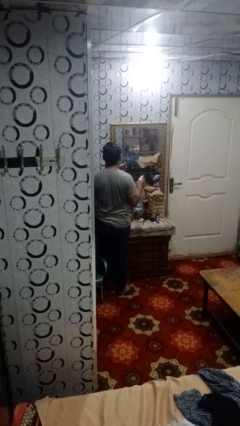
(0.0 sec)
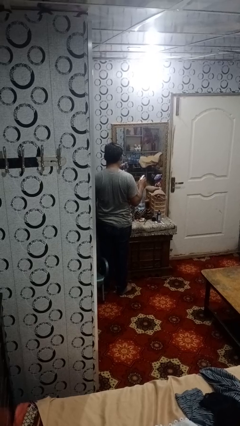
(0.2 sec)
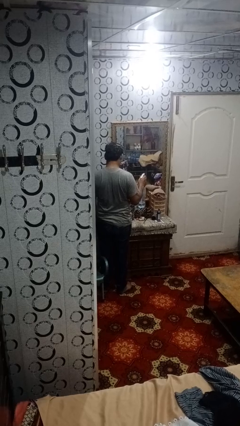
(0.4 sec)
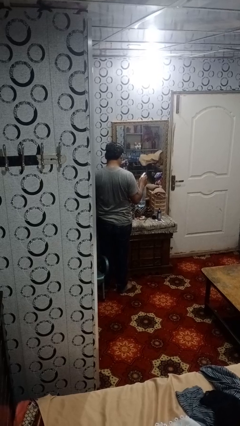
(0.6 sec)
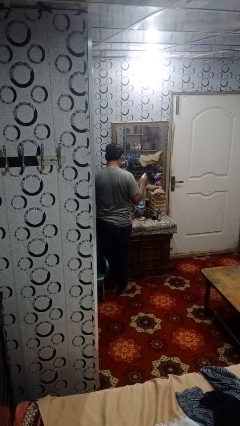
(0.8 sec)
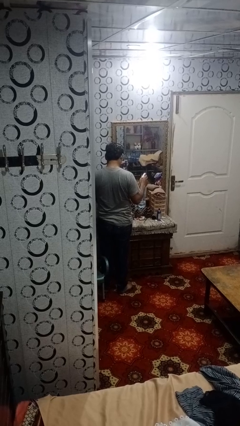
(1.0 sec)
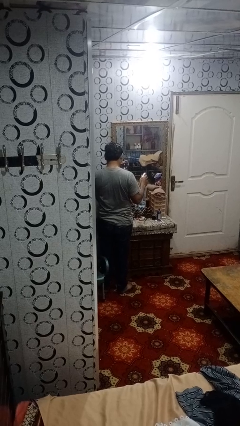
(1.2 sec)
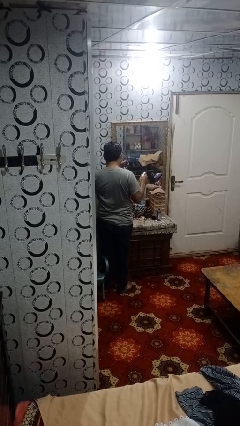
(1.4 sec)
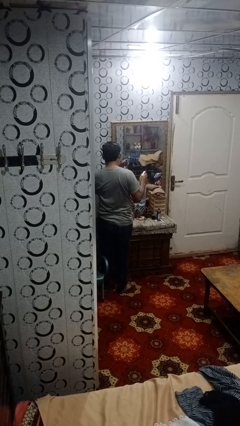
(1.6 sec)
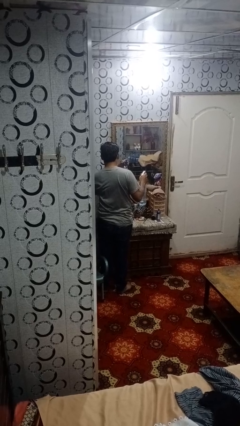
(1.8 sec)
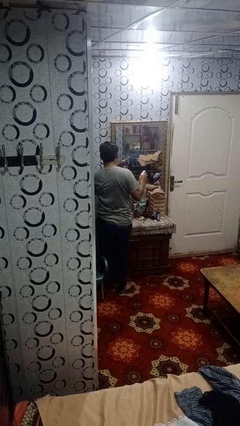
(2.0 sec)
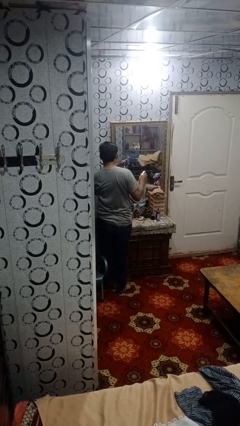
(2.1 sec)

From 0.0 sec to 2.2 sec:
person sprays from bottle

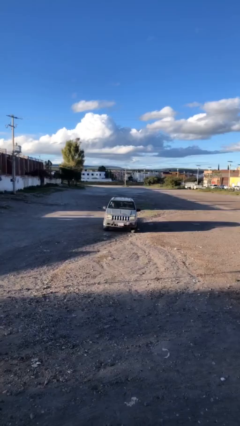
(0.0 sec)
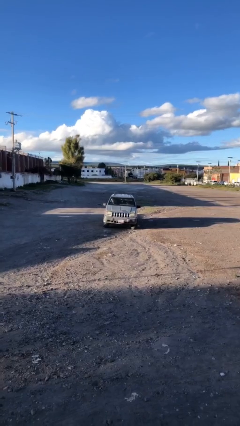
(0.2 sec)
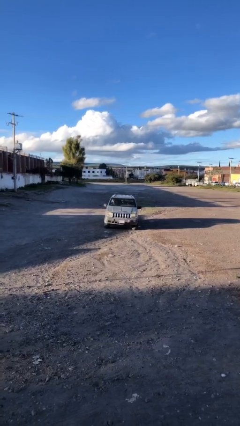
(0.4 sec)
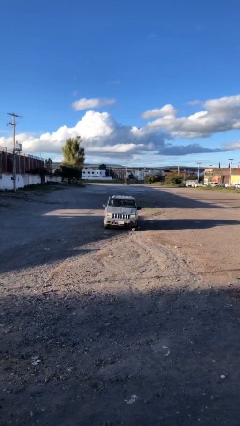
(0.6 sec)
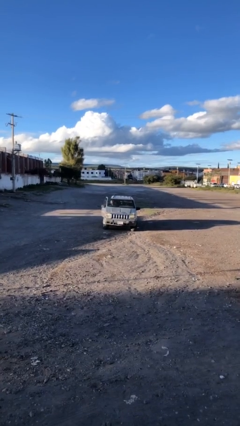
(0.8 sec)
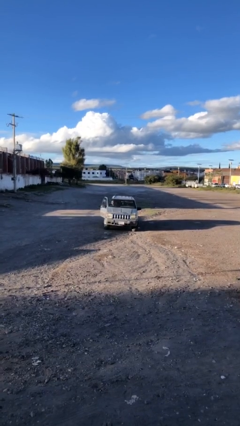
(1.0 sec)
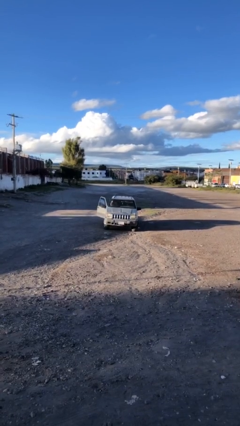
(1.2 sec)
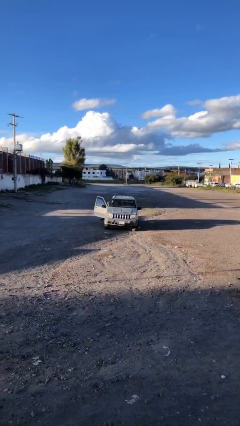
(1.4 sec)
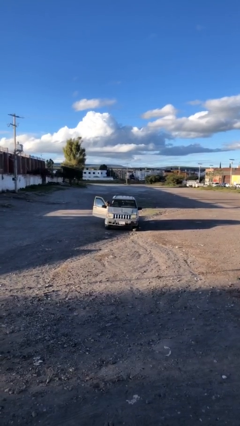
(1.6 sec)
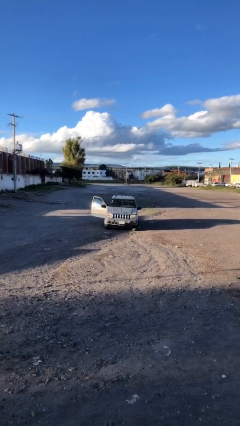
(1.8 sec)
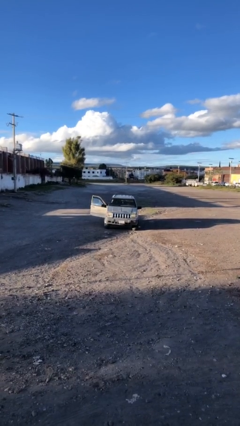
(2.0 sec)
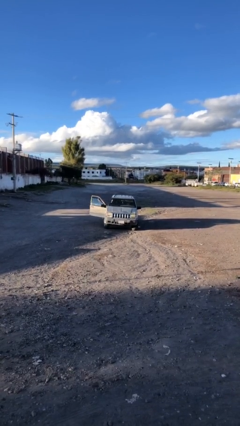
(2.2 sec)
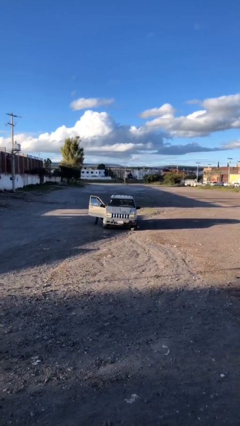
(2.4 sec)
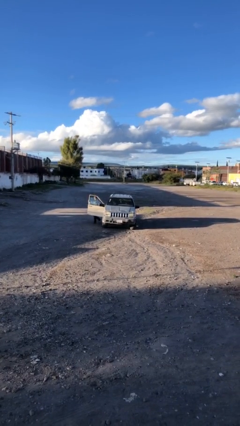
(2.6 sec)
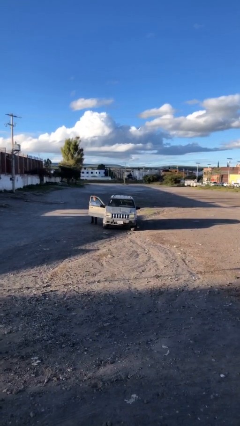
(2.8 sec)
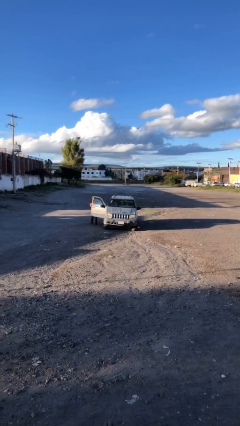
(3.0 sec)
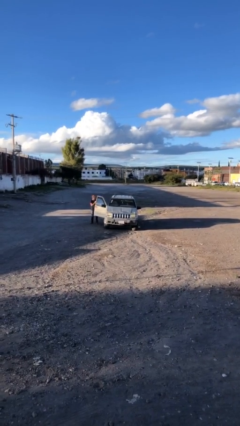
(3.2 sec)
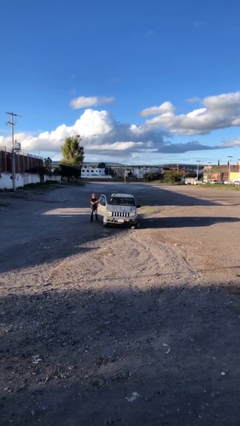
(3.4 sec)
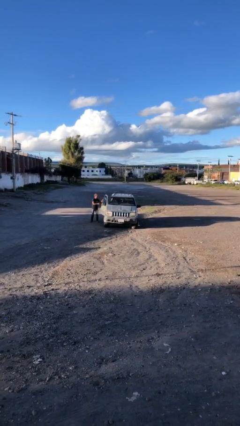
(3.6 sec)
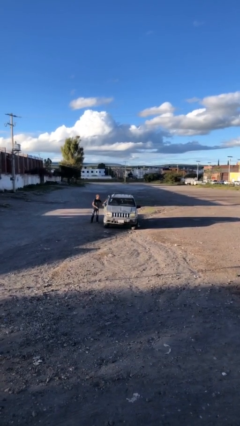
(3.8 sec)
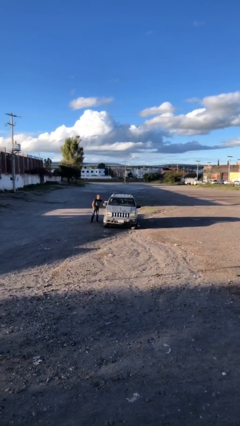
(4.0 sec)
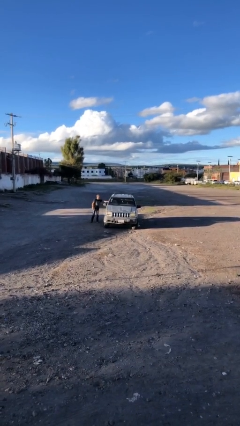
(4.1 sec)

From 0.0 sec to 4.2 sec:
car drops off person

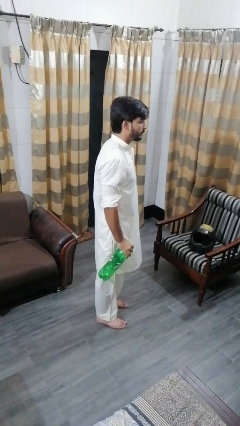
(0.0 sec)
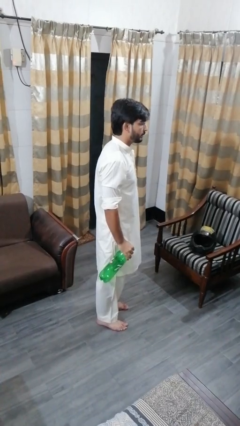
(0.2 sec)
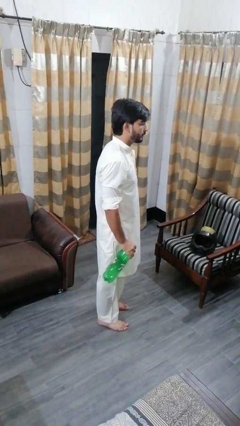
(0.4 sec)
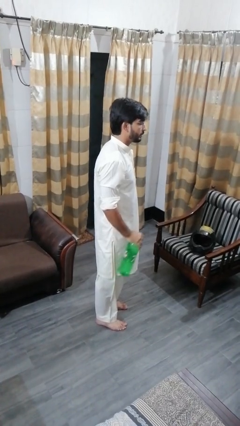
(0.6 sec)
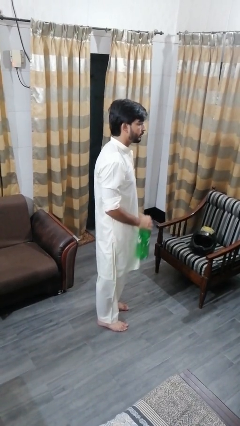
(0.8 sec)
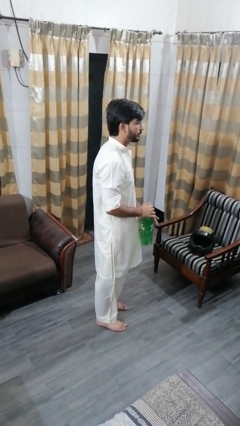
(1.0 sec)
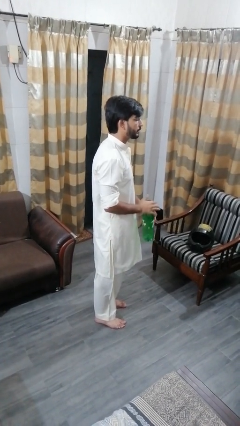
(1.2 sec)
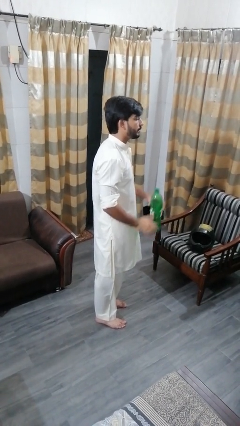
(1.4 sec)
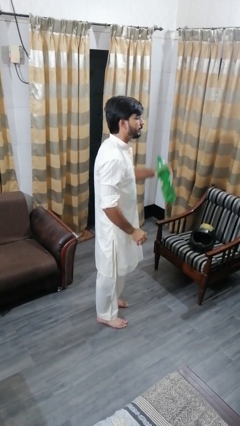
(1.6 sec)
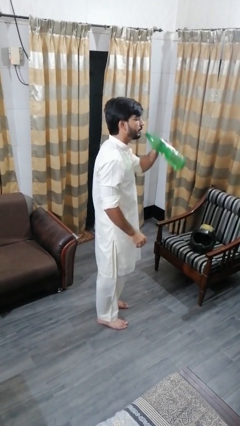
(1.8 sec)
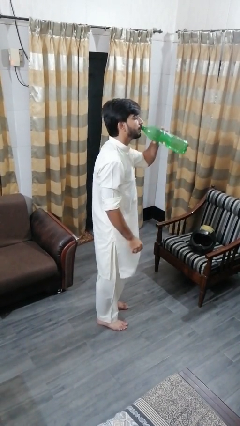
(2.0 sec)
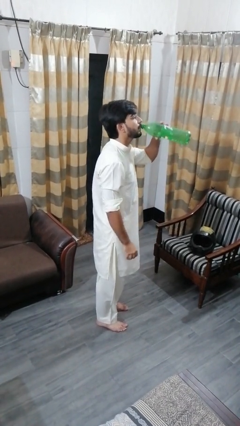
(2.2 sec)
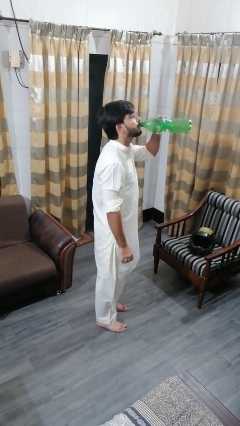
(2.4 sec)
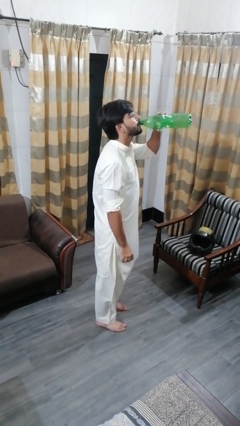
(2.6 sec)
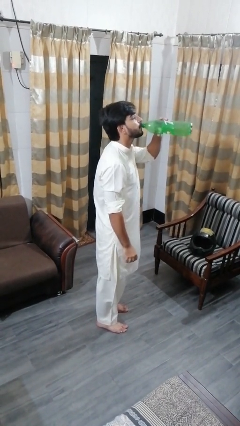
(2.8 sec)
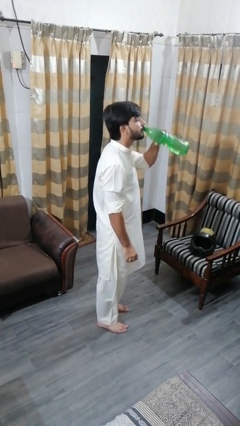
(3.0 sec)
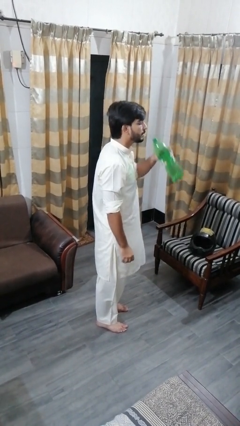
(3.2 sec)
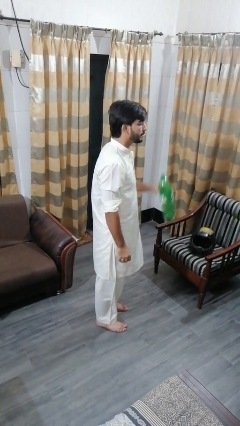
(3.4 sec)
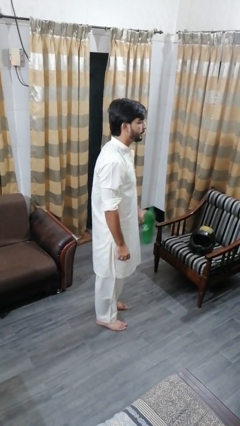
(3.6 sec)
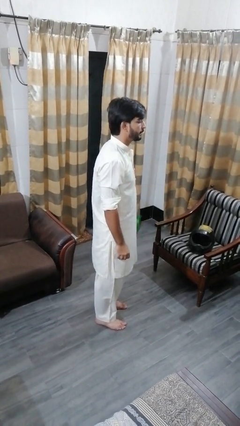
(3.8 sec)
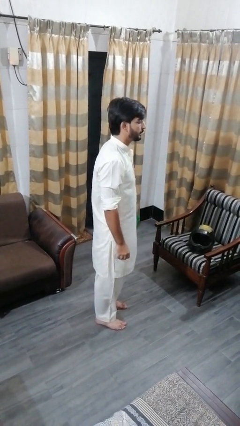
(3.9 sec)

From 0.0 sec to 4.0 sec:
person drinks from bottle

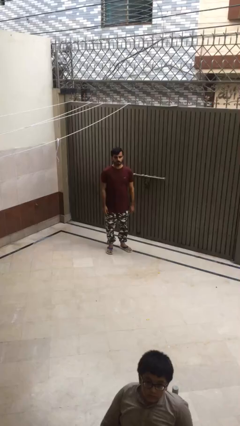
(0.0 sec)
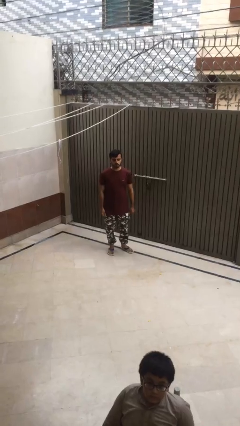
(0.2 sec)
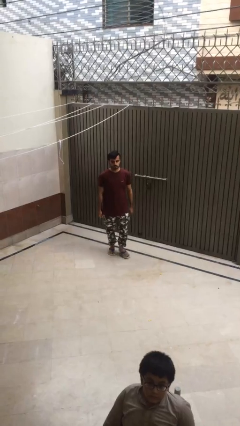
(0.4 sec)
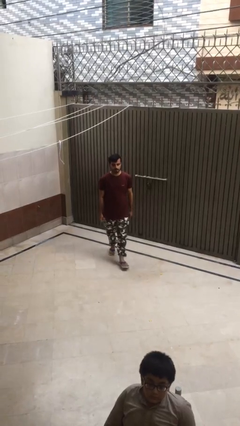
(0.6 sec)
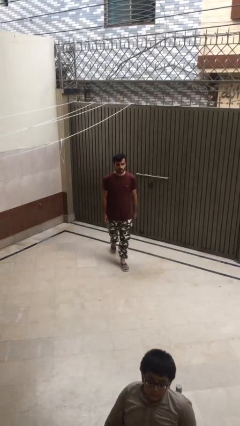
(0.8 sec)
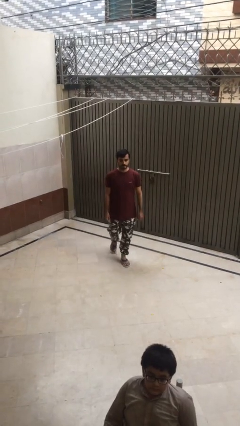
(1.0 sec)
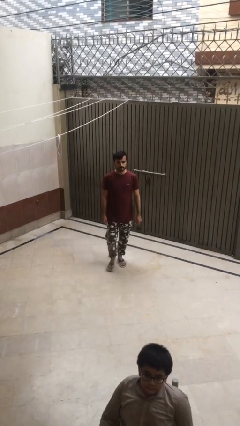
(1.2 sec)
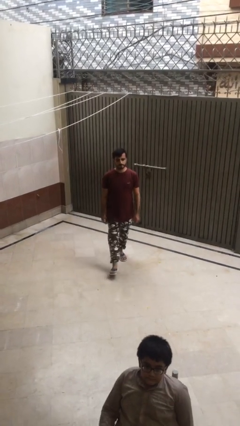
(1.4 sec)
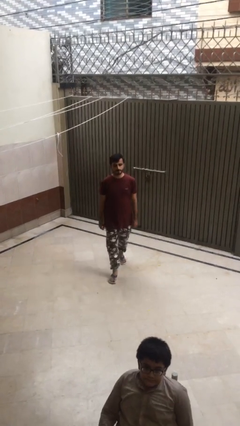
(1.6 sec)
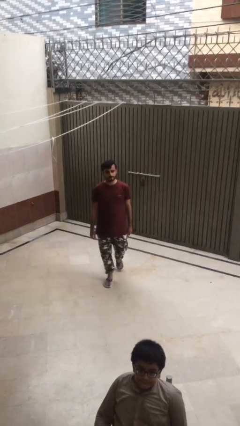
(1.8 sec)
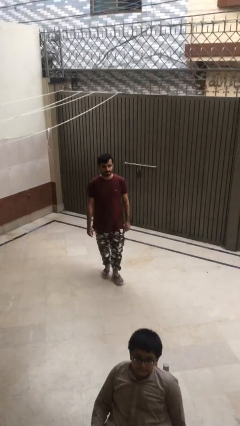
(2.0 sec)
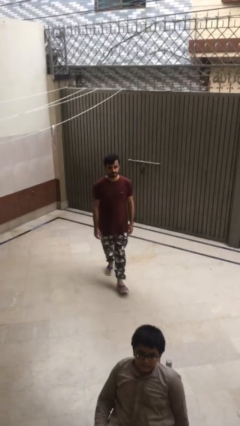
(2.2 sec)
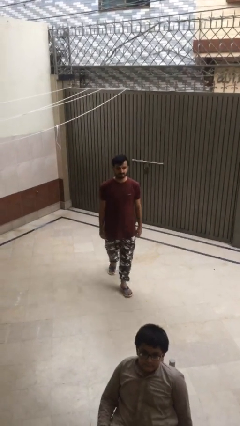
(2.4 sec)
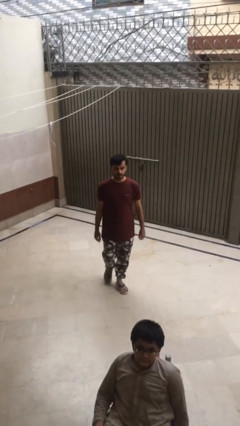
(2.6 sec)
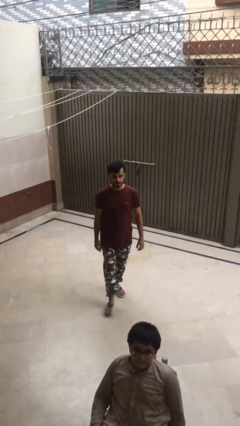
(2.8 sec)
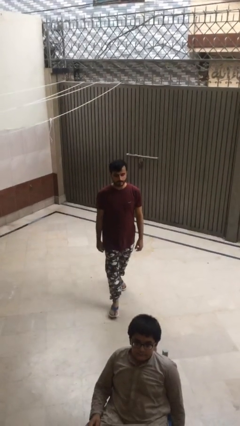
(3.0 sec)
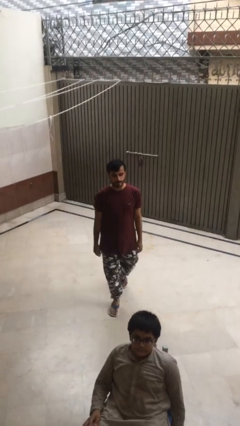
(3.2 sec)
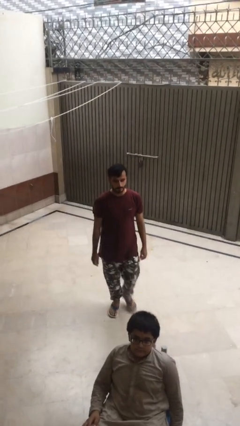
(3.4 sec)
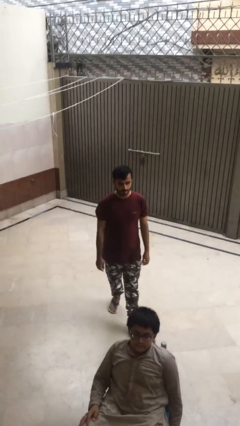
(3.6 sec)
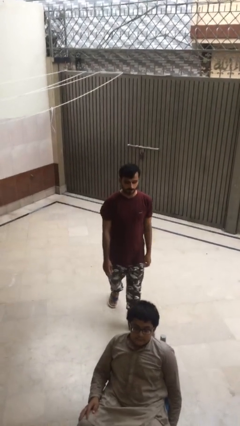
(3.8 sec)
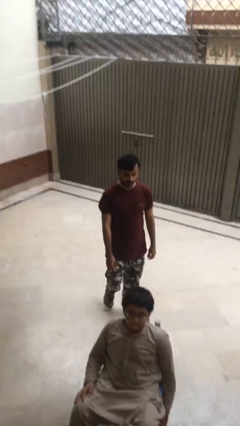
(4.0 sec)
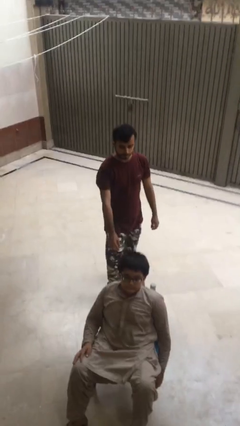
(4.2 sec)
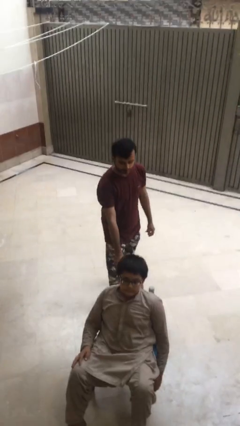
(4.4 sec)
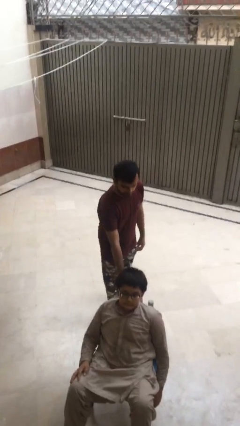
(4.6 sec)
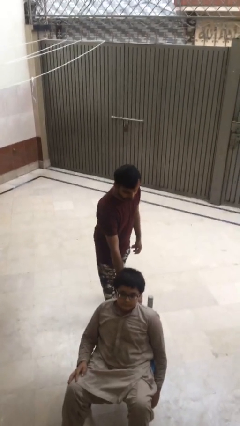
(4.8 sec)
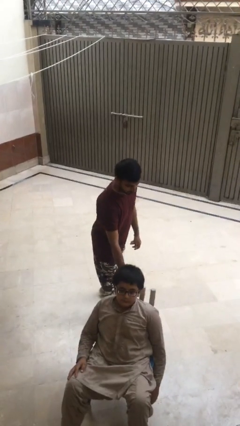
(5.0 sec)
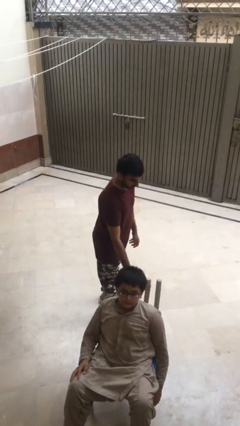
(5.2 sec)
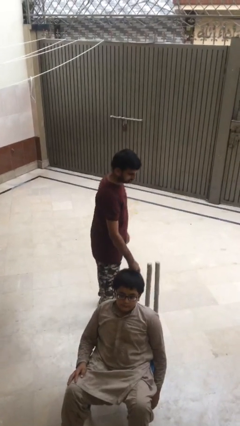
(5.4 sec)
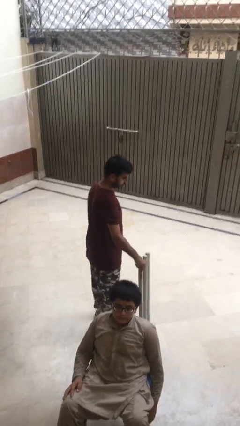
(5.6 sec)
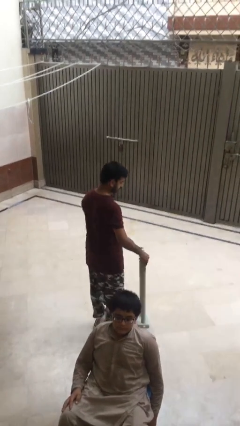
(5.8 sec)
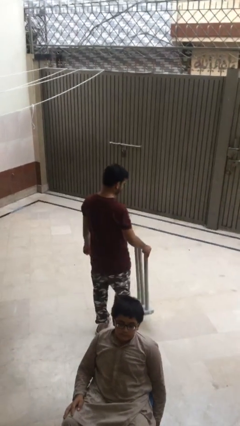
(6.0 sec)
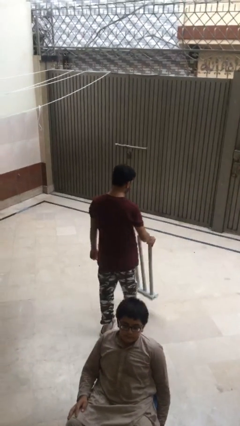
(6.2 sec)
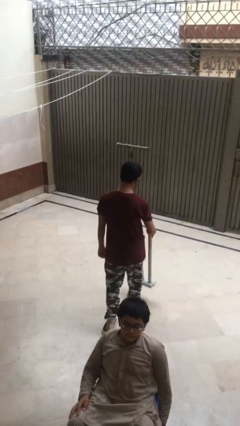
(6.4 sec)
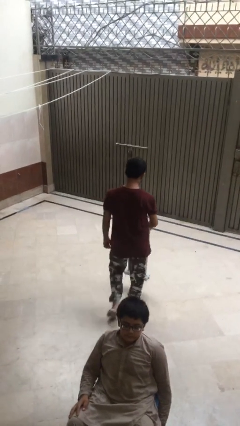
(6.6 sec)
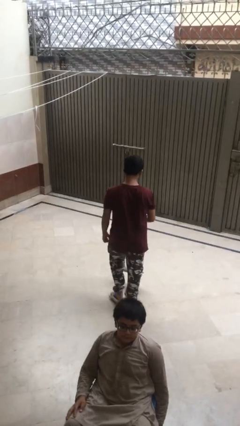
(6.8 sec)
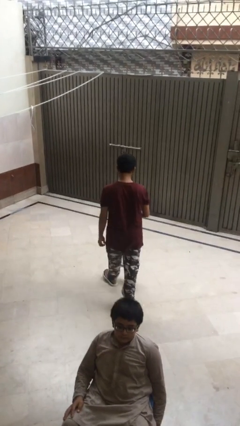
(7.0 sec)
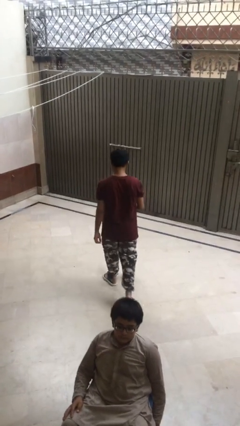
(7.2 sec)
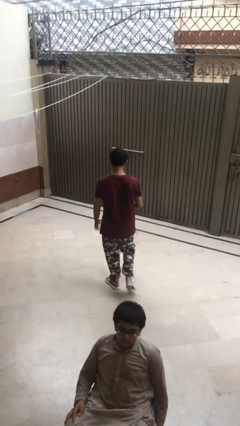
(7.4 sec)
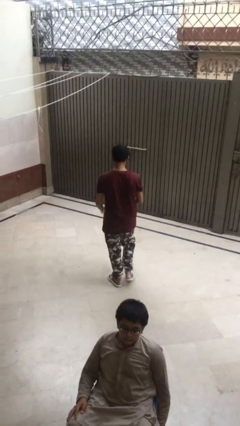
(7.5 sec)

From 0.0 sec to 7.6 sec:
person steals object from person
